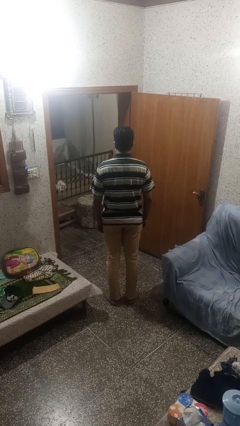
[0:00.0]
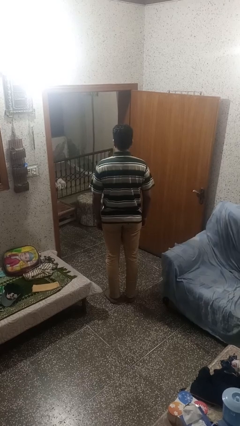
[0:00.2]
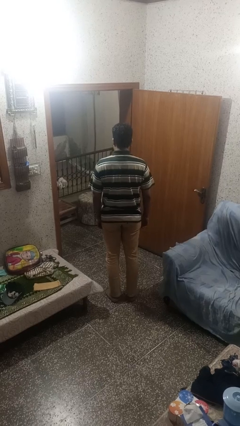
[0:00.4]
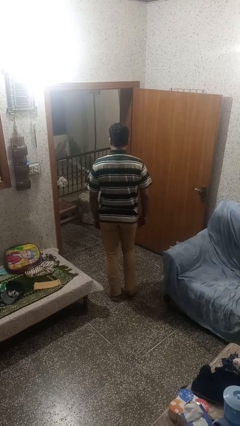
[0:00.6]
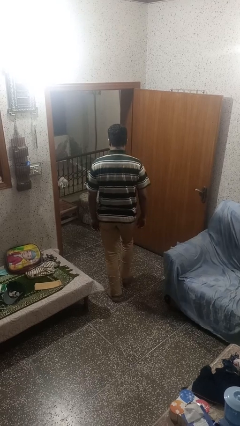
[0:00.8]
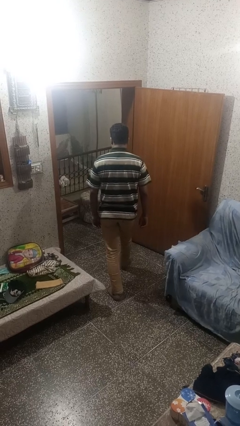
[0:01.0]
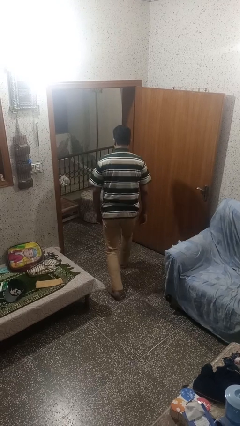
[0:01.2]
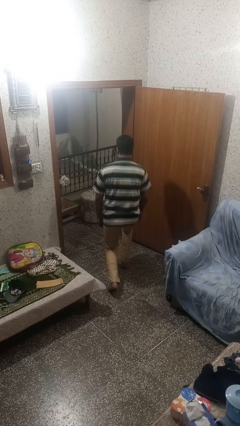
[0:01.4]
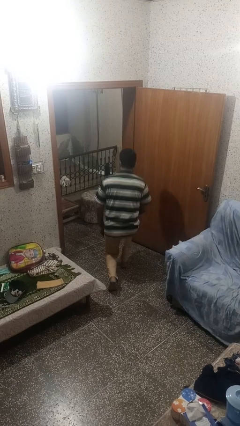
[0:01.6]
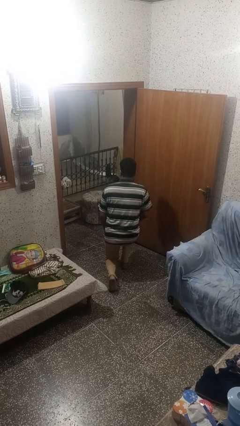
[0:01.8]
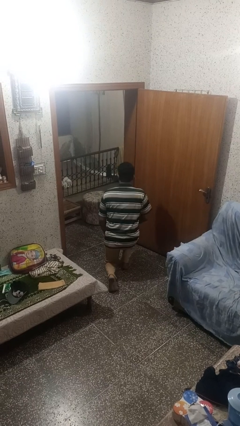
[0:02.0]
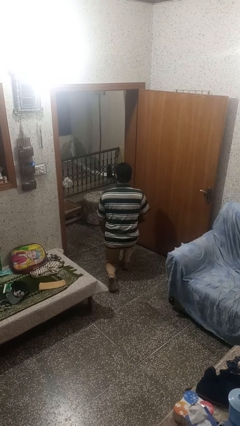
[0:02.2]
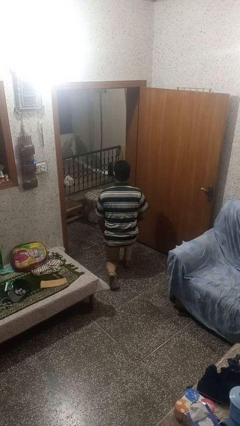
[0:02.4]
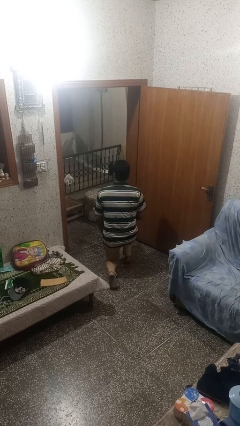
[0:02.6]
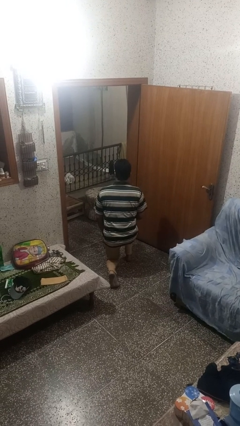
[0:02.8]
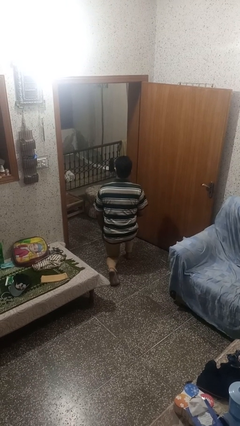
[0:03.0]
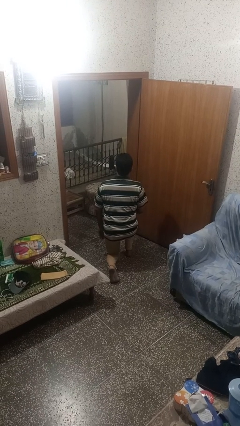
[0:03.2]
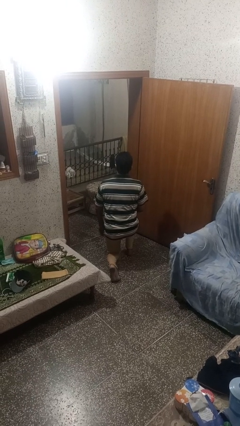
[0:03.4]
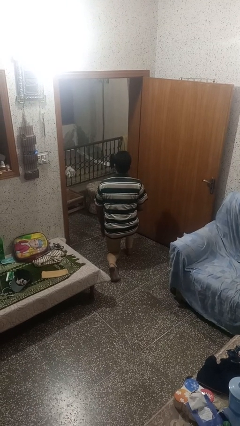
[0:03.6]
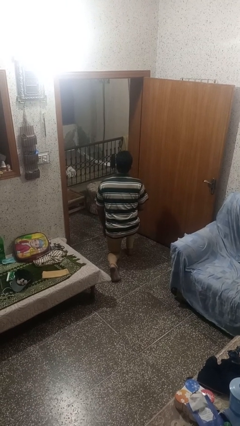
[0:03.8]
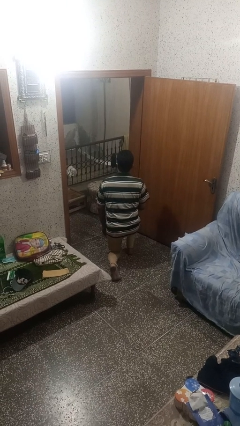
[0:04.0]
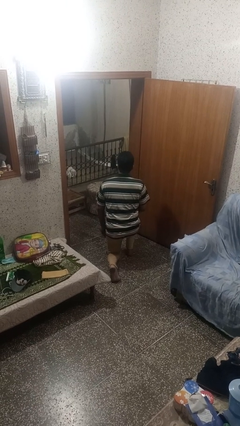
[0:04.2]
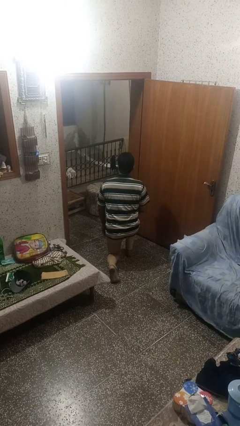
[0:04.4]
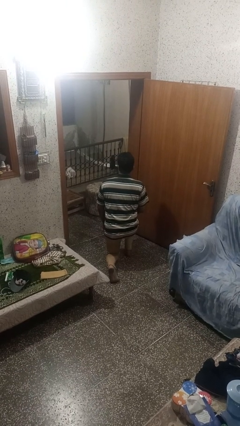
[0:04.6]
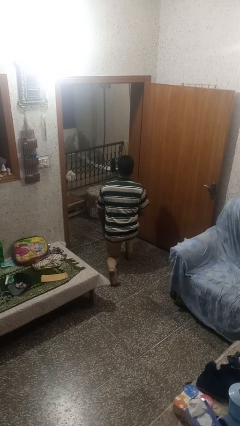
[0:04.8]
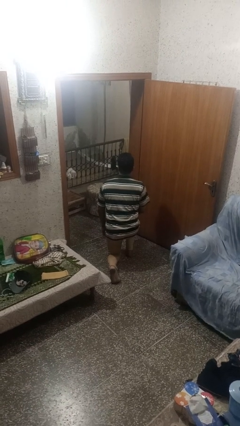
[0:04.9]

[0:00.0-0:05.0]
person kneels

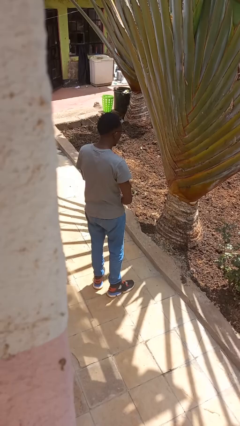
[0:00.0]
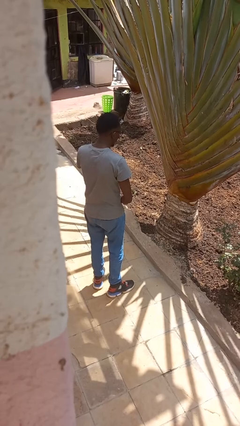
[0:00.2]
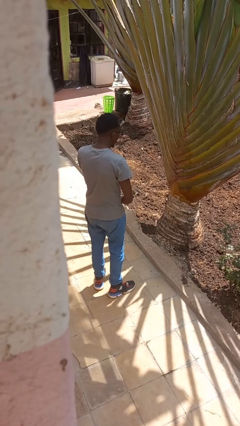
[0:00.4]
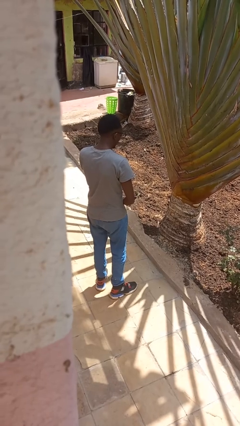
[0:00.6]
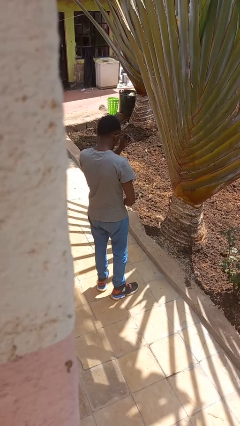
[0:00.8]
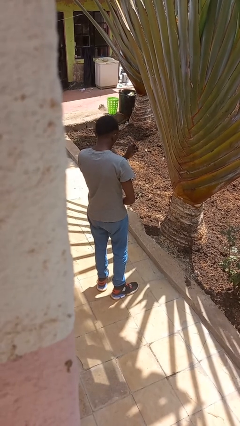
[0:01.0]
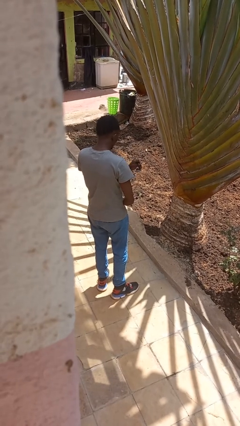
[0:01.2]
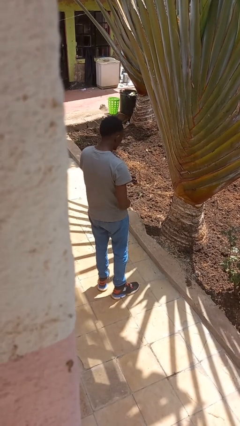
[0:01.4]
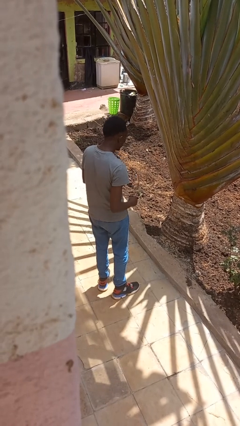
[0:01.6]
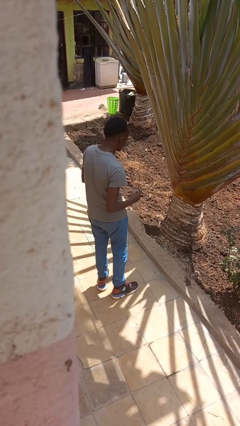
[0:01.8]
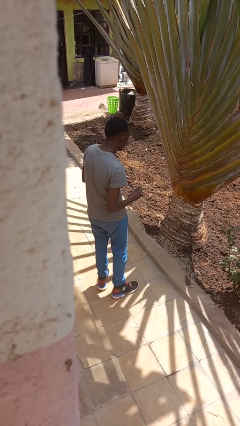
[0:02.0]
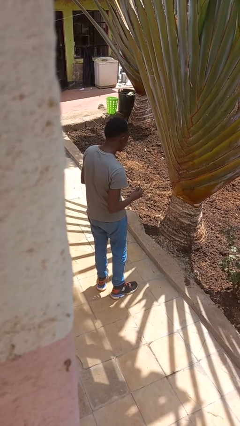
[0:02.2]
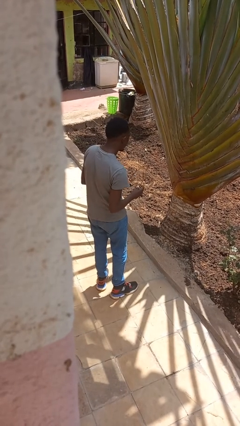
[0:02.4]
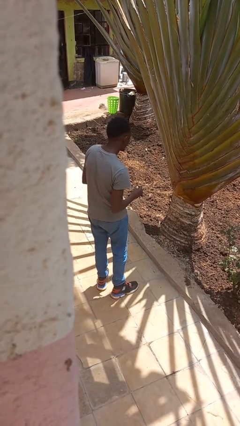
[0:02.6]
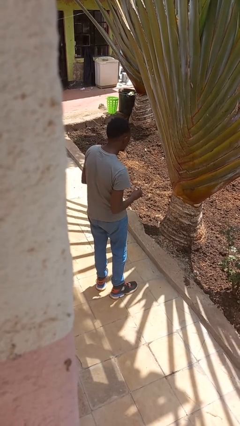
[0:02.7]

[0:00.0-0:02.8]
person takes off glasses

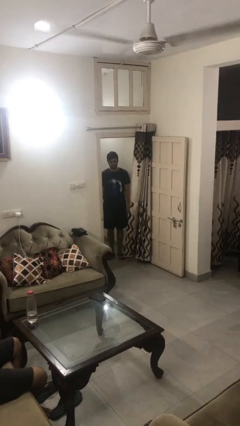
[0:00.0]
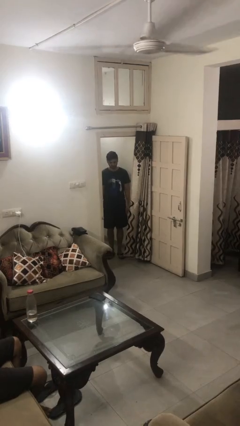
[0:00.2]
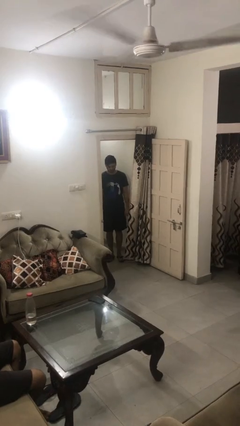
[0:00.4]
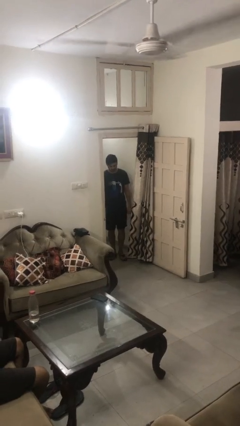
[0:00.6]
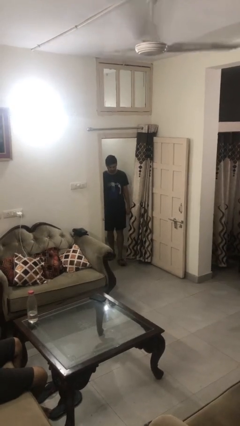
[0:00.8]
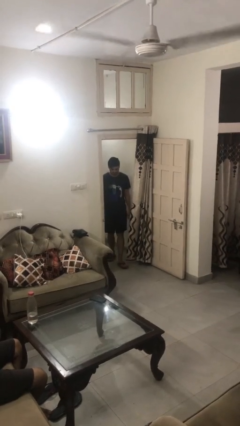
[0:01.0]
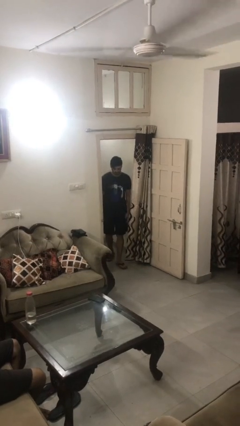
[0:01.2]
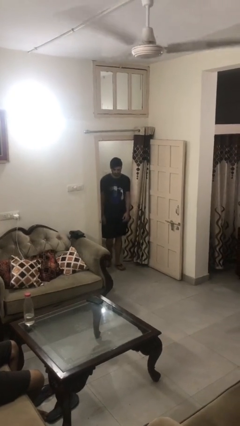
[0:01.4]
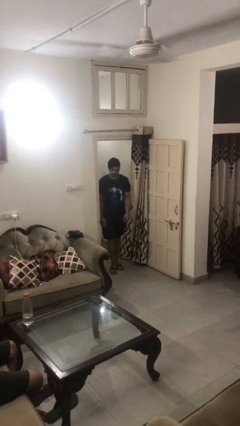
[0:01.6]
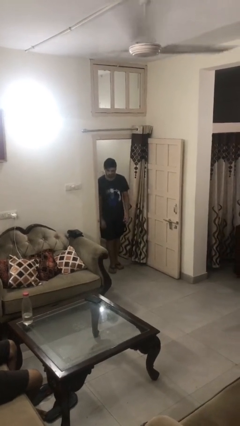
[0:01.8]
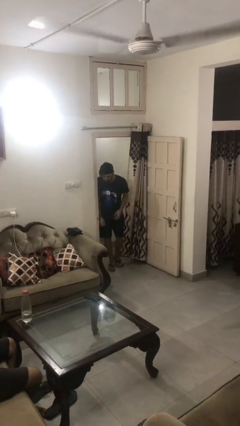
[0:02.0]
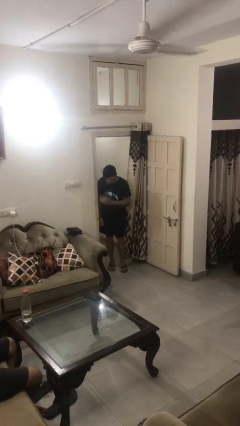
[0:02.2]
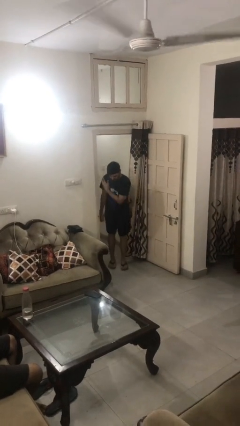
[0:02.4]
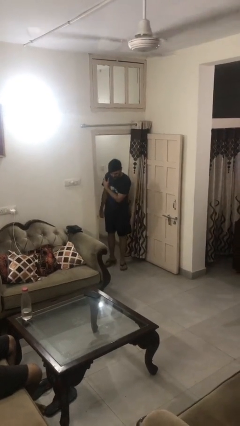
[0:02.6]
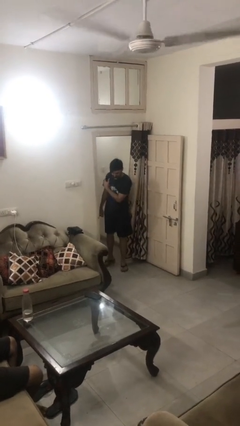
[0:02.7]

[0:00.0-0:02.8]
person bumps into wall

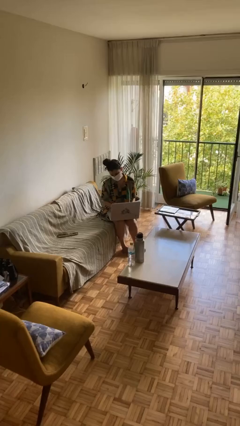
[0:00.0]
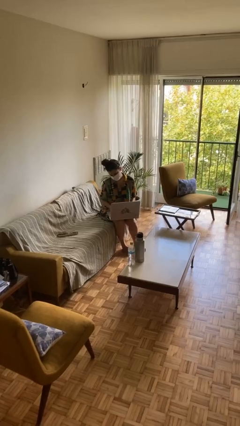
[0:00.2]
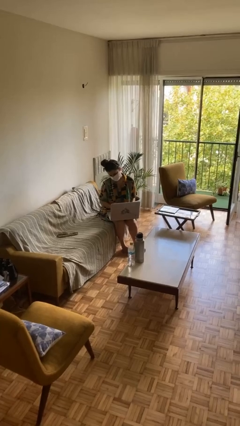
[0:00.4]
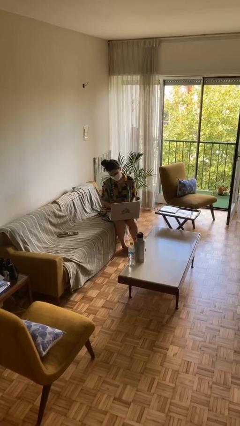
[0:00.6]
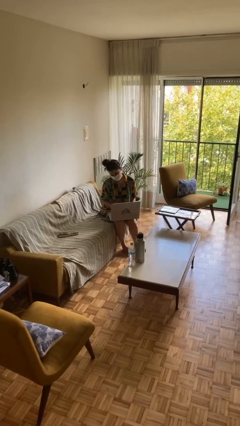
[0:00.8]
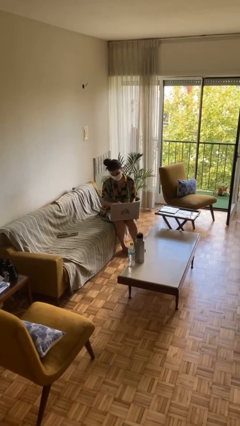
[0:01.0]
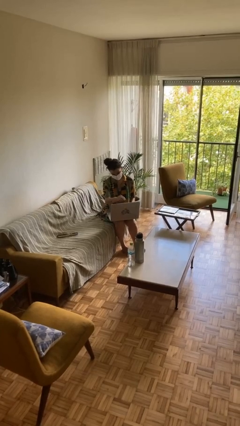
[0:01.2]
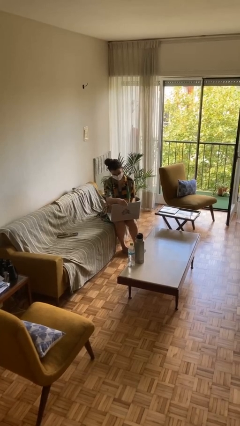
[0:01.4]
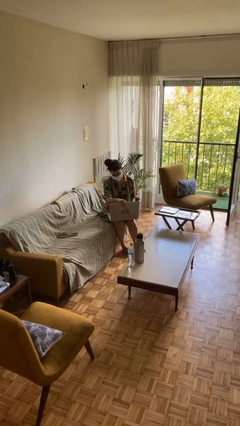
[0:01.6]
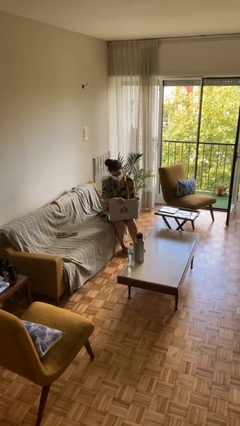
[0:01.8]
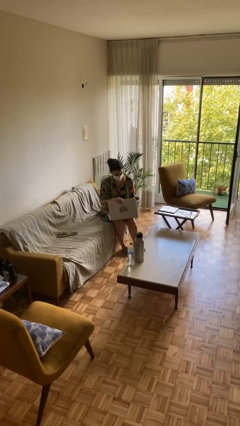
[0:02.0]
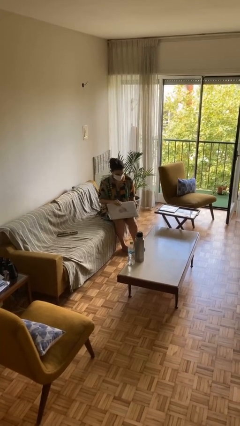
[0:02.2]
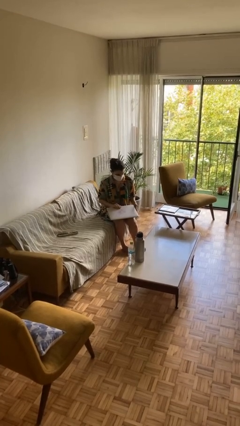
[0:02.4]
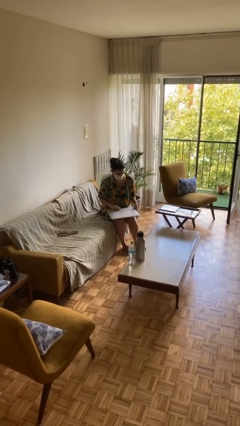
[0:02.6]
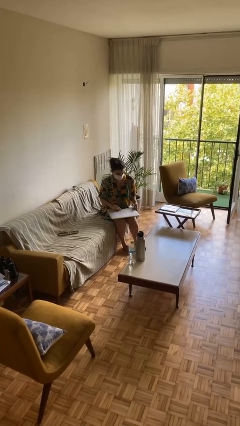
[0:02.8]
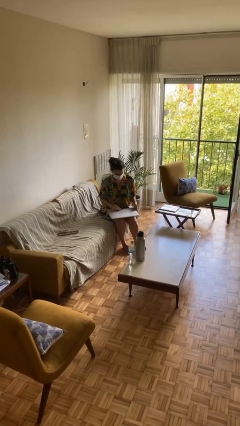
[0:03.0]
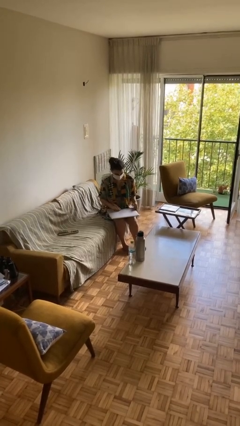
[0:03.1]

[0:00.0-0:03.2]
person interacts with laptop

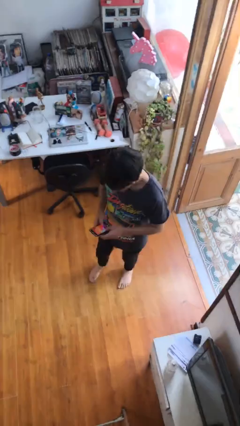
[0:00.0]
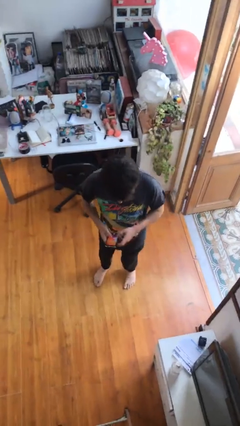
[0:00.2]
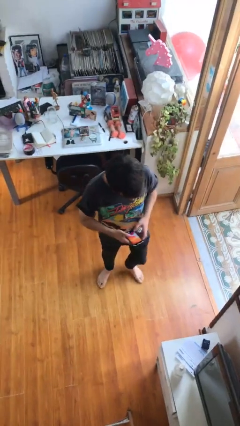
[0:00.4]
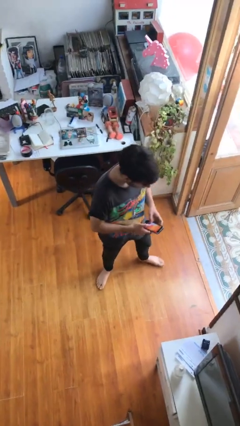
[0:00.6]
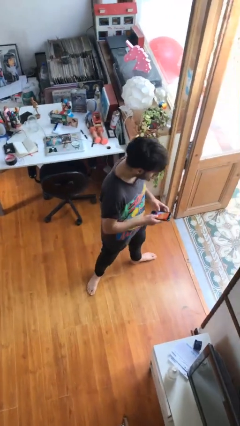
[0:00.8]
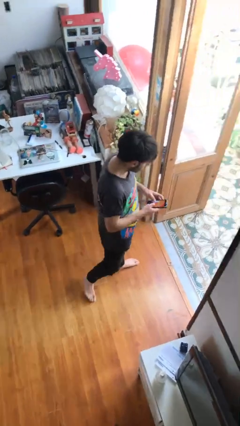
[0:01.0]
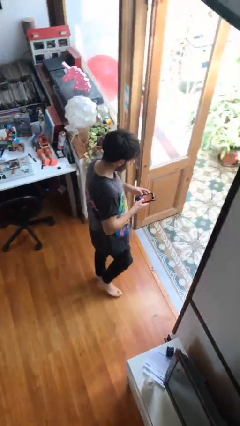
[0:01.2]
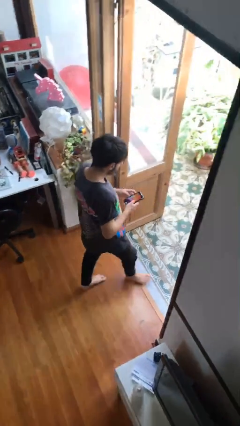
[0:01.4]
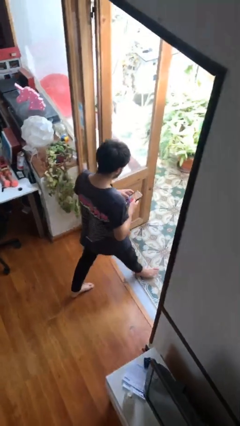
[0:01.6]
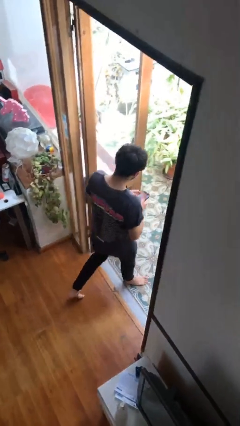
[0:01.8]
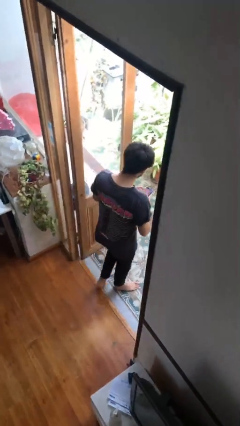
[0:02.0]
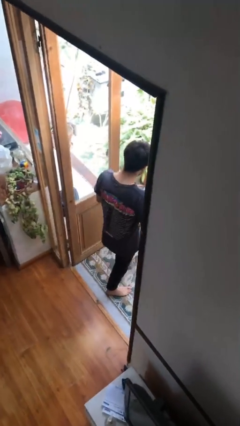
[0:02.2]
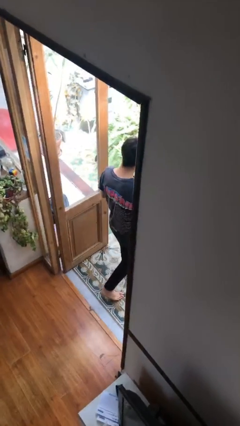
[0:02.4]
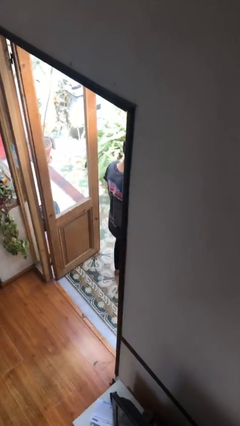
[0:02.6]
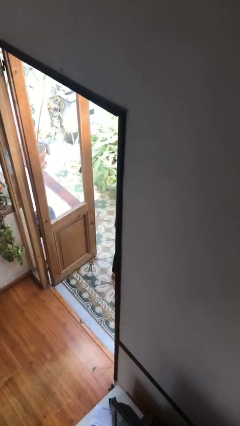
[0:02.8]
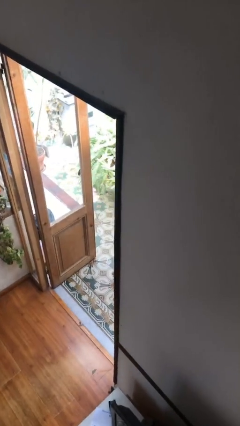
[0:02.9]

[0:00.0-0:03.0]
person exits scene through structure

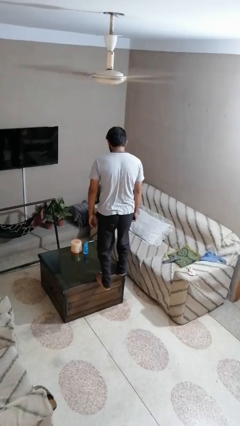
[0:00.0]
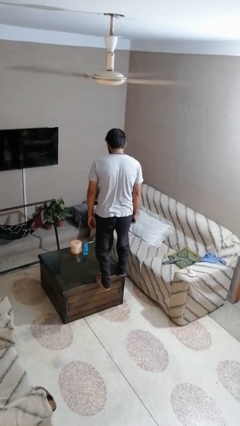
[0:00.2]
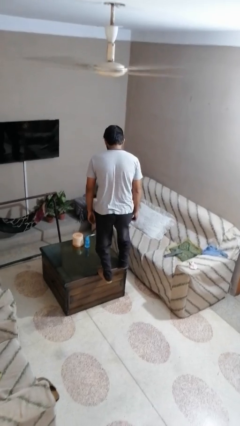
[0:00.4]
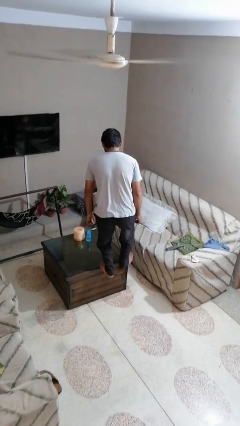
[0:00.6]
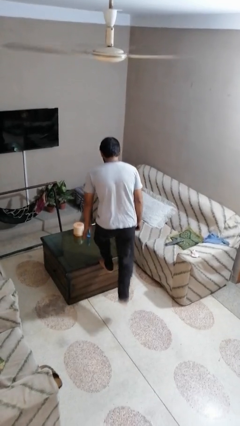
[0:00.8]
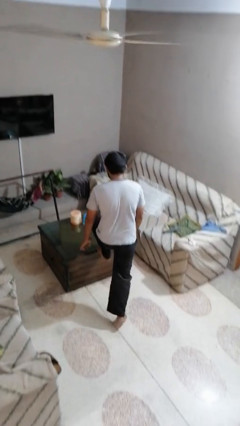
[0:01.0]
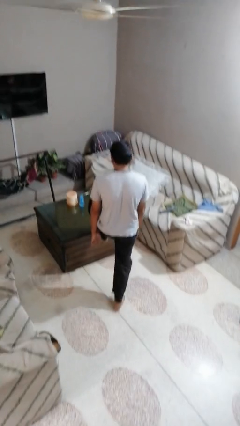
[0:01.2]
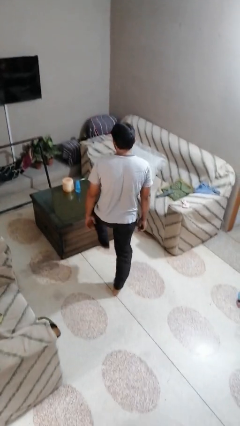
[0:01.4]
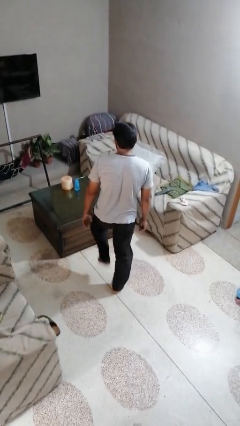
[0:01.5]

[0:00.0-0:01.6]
person climbs off table
